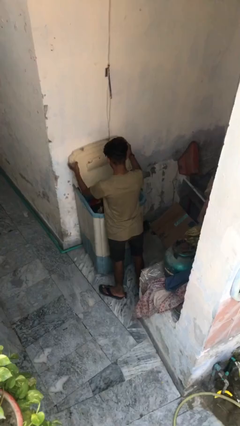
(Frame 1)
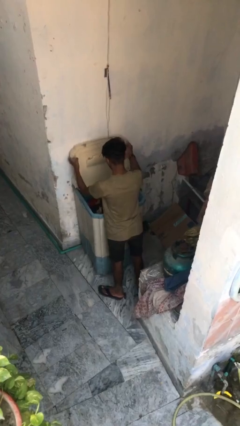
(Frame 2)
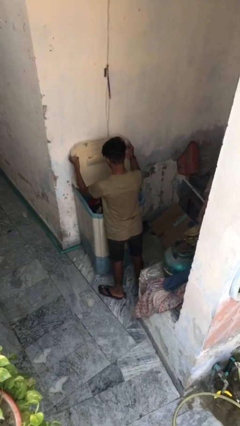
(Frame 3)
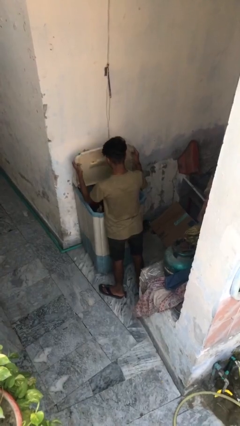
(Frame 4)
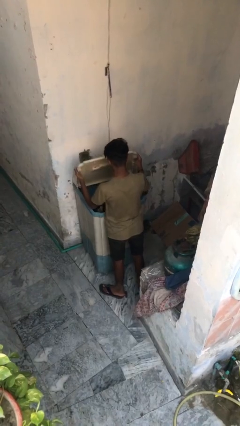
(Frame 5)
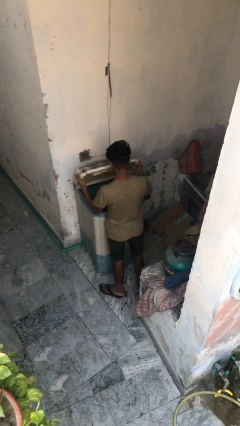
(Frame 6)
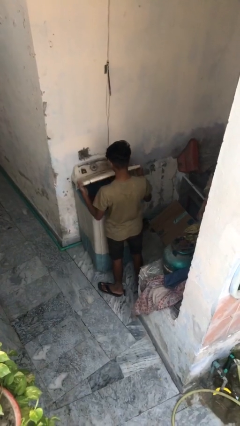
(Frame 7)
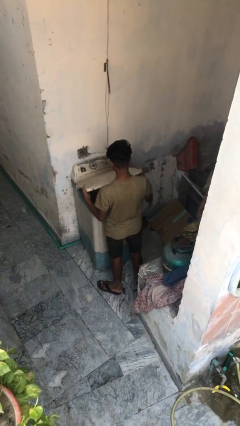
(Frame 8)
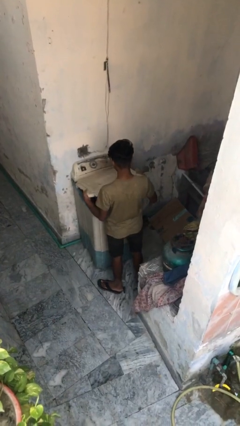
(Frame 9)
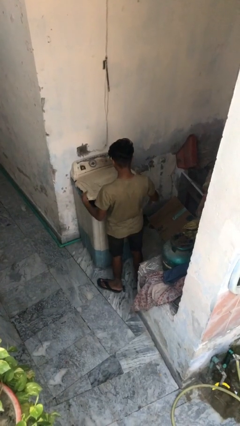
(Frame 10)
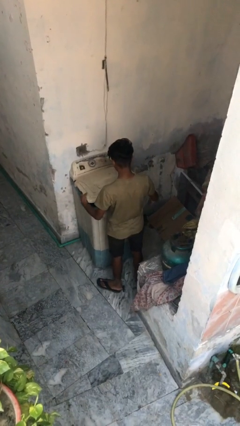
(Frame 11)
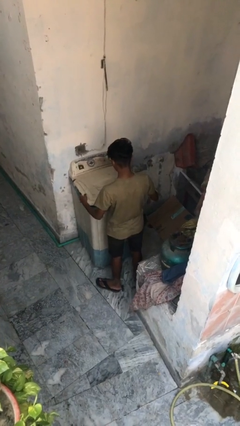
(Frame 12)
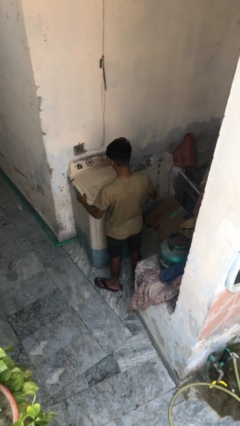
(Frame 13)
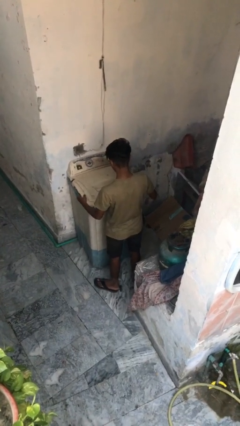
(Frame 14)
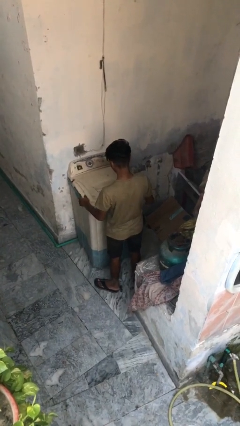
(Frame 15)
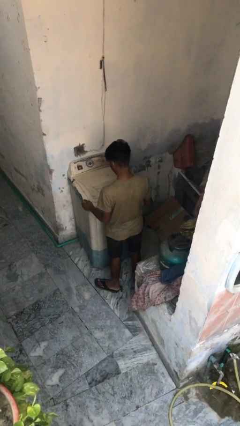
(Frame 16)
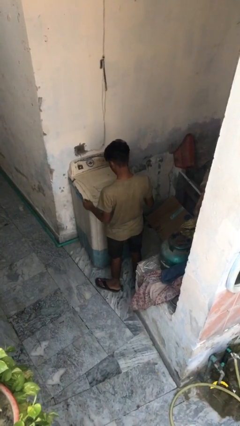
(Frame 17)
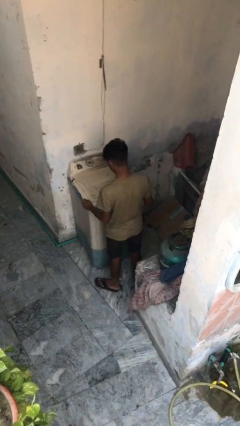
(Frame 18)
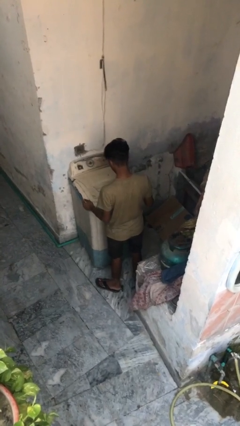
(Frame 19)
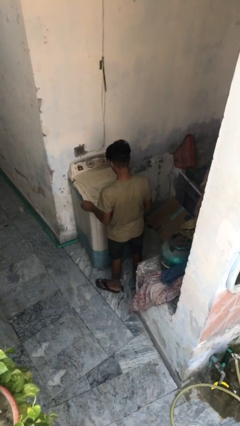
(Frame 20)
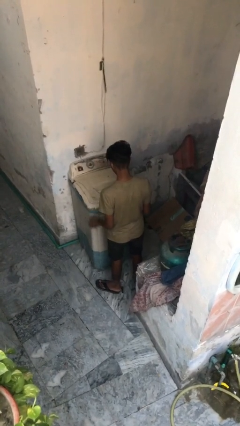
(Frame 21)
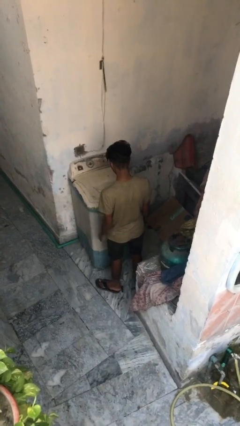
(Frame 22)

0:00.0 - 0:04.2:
person closes clothes washer

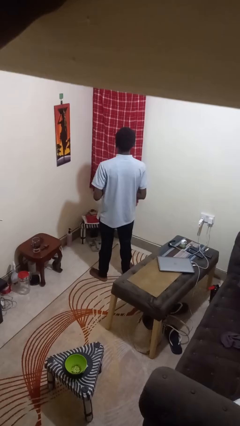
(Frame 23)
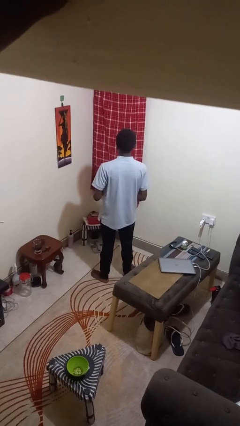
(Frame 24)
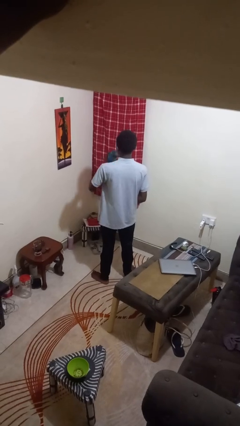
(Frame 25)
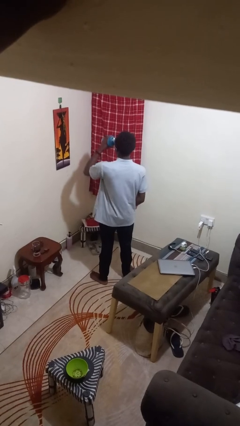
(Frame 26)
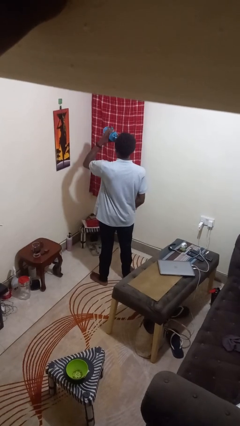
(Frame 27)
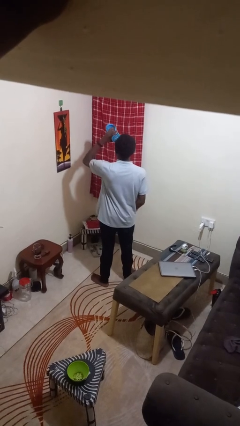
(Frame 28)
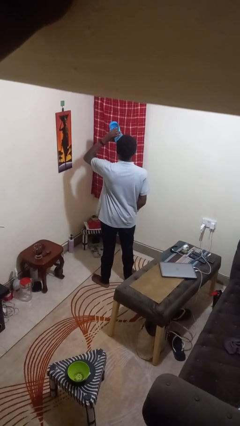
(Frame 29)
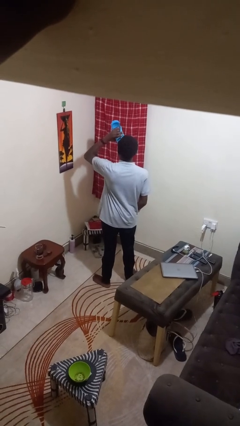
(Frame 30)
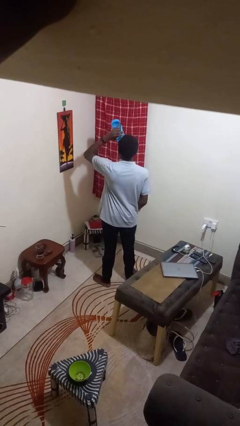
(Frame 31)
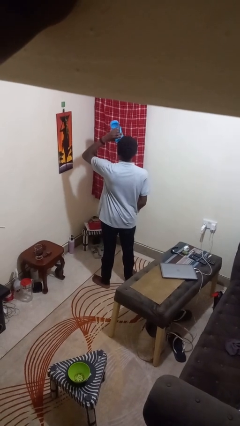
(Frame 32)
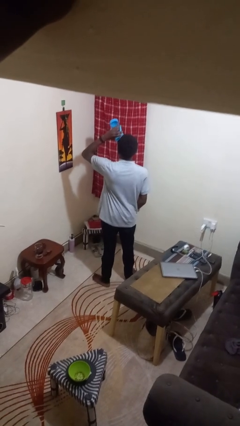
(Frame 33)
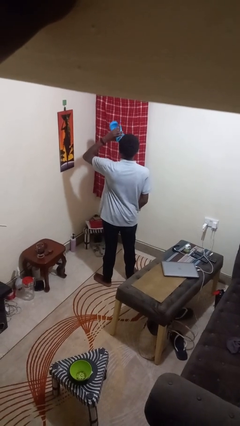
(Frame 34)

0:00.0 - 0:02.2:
person drinks from bottle

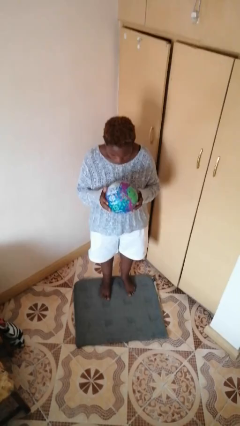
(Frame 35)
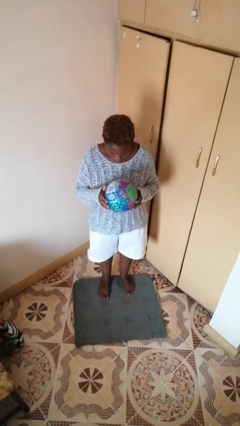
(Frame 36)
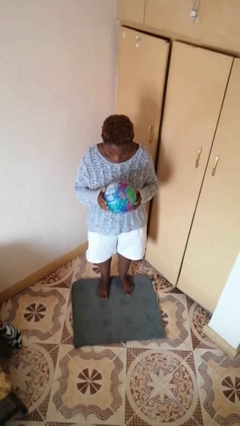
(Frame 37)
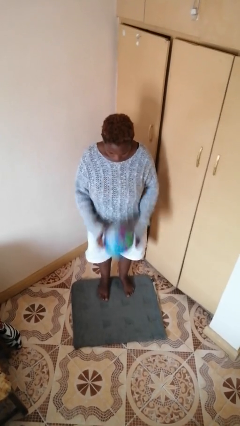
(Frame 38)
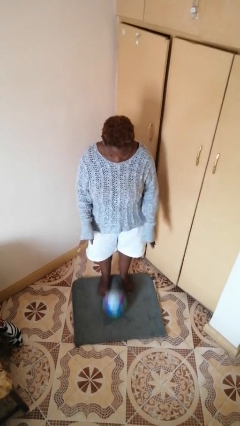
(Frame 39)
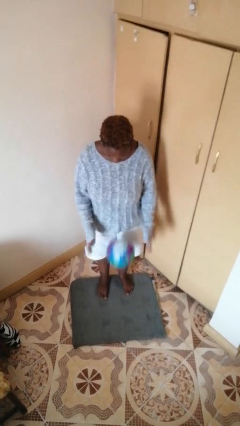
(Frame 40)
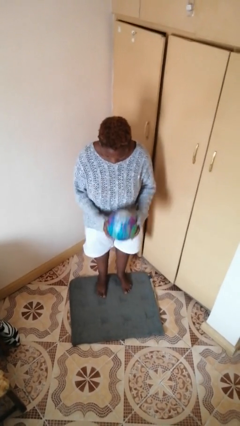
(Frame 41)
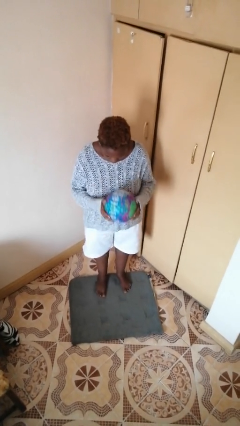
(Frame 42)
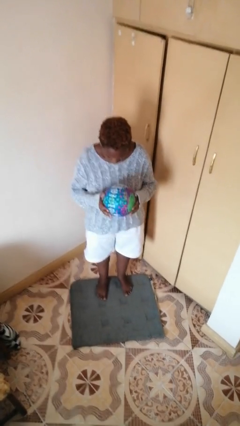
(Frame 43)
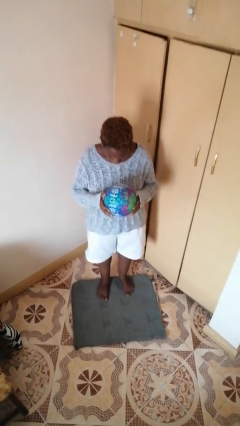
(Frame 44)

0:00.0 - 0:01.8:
person bounces ball on floor

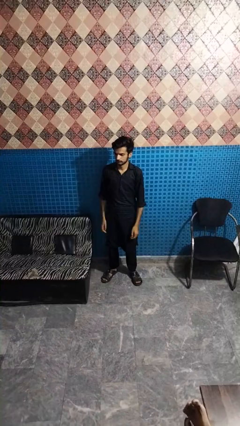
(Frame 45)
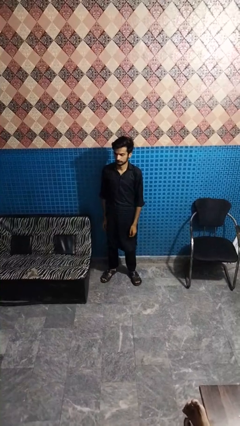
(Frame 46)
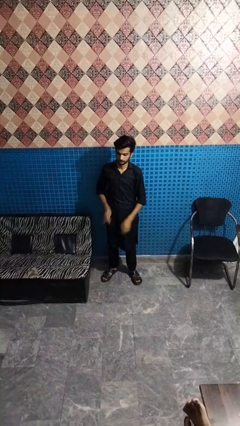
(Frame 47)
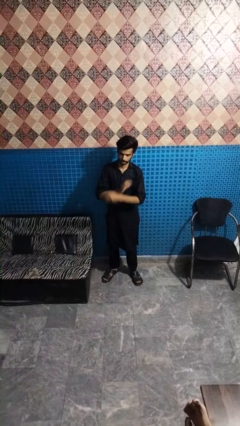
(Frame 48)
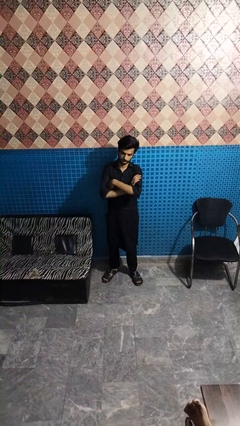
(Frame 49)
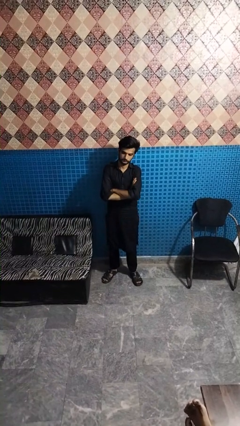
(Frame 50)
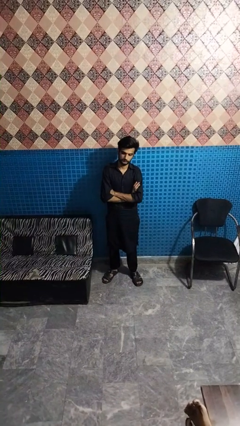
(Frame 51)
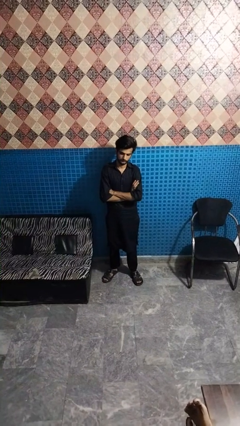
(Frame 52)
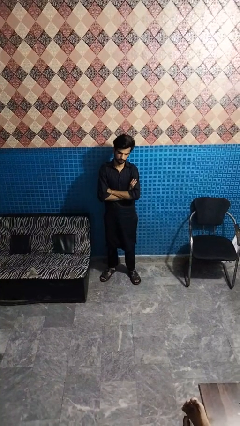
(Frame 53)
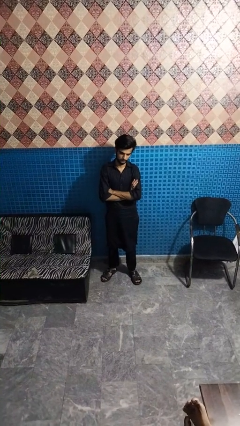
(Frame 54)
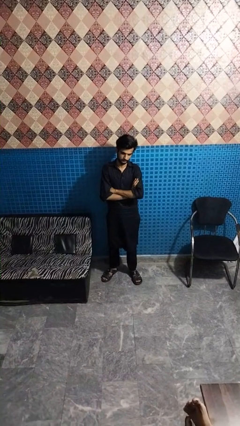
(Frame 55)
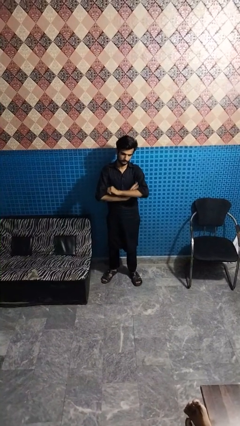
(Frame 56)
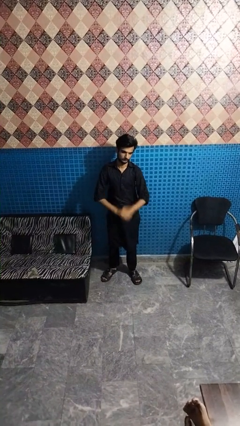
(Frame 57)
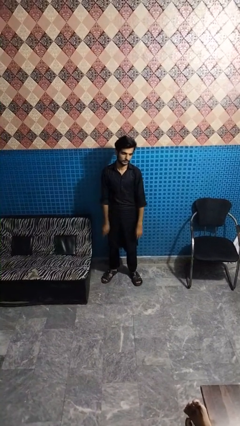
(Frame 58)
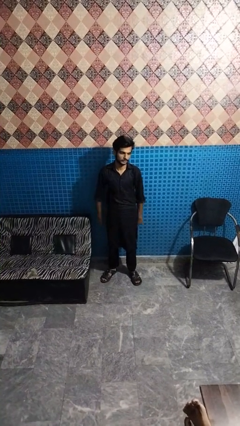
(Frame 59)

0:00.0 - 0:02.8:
person crosses arms

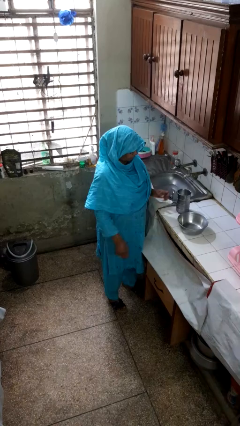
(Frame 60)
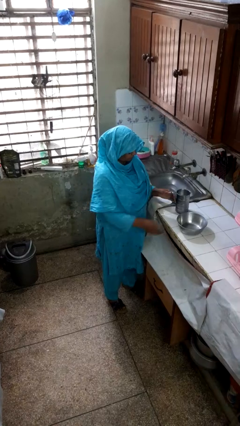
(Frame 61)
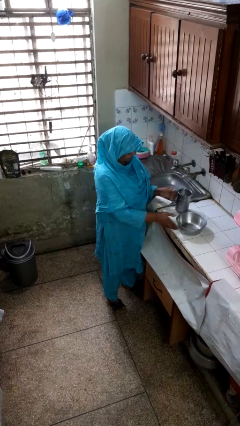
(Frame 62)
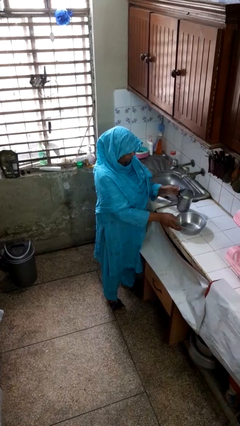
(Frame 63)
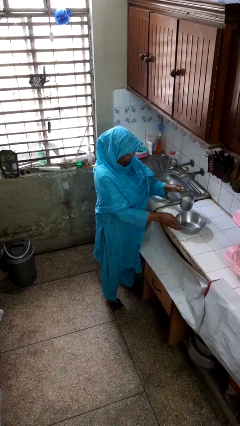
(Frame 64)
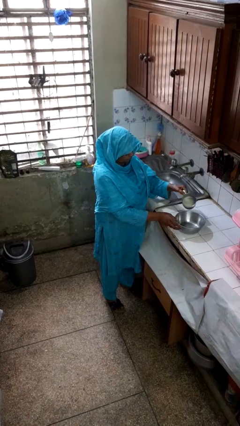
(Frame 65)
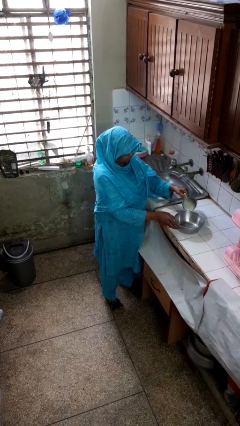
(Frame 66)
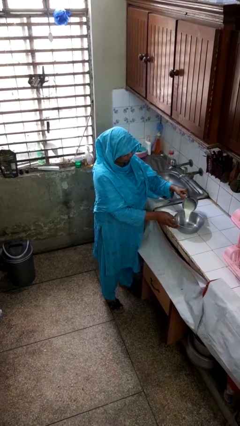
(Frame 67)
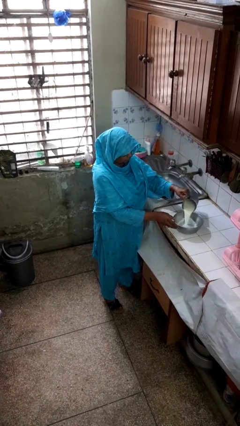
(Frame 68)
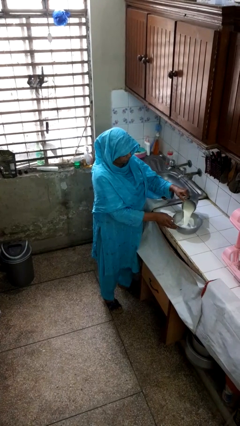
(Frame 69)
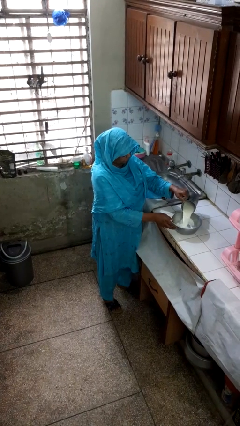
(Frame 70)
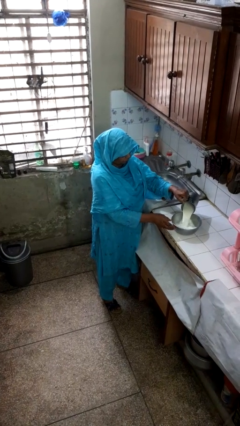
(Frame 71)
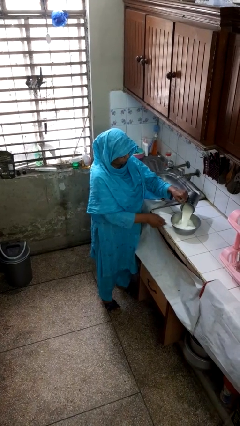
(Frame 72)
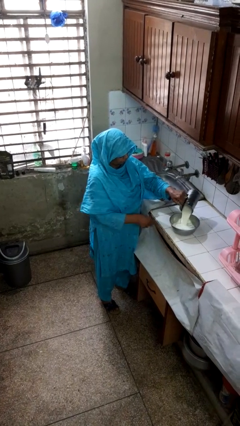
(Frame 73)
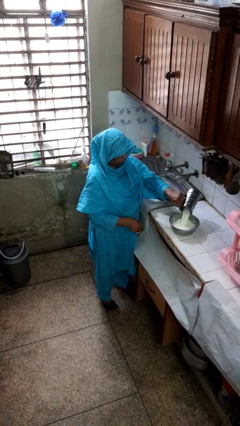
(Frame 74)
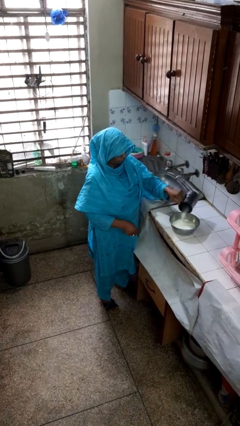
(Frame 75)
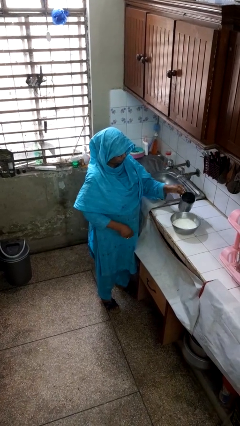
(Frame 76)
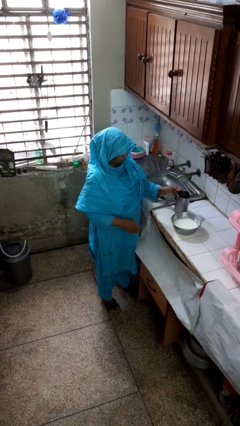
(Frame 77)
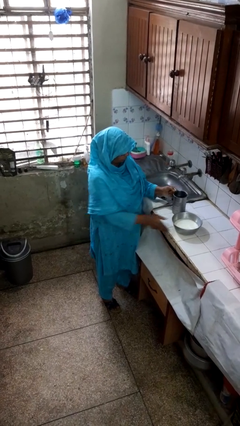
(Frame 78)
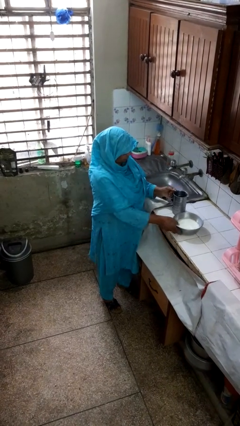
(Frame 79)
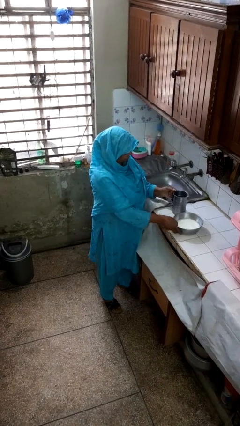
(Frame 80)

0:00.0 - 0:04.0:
person pours into bowl

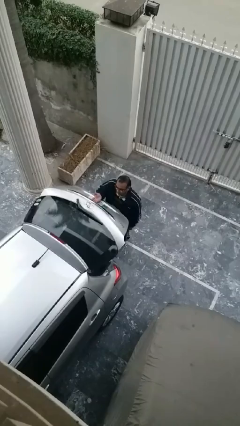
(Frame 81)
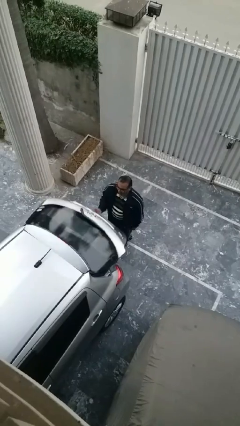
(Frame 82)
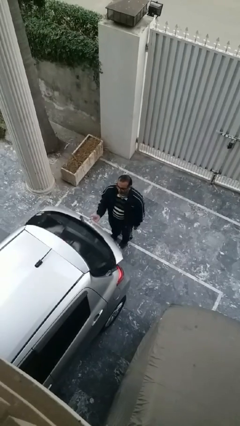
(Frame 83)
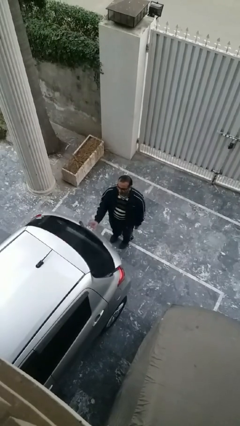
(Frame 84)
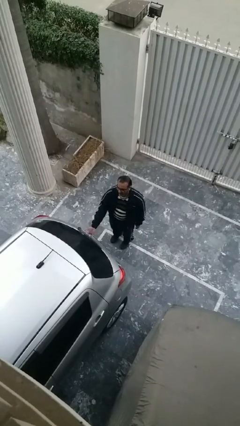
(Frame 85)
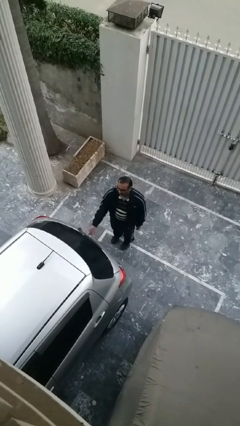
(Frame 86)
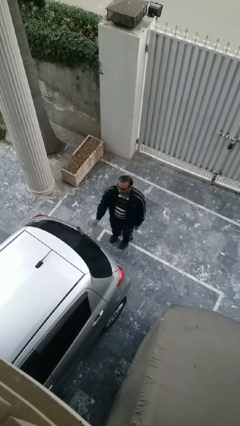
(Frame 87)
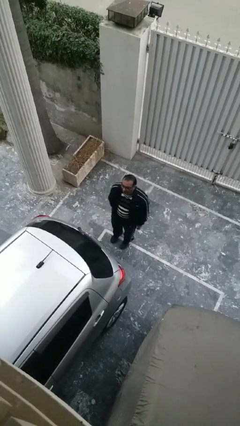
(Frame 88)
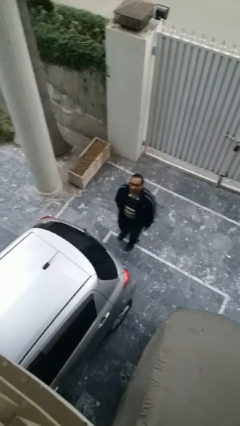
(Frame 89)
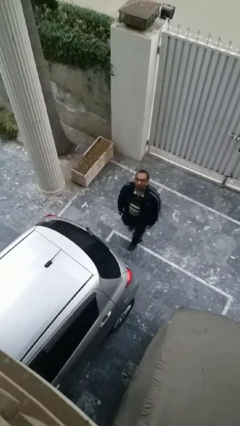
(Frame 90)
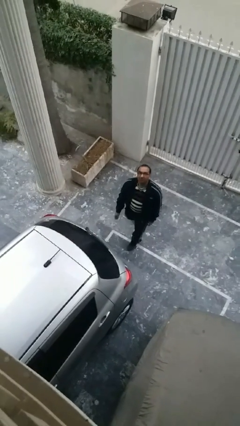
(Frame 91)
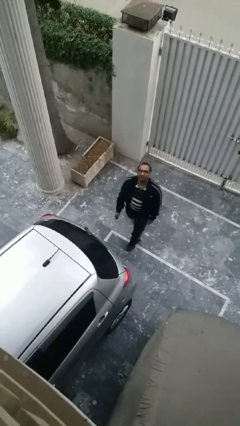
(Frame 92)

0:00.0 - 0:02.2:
person closes car trunk

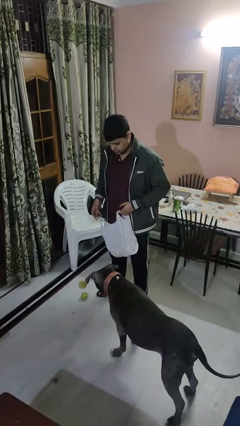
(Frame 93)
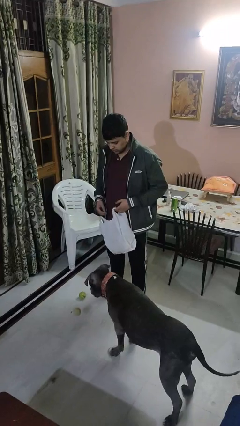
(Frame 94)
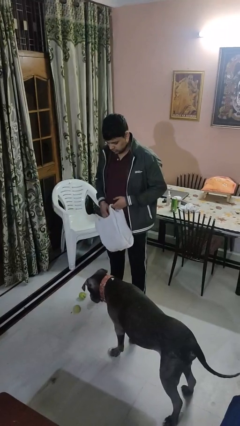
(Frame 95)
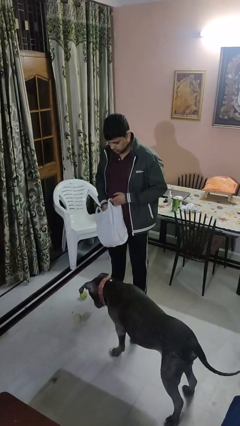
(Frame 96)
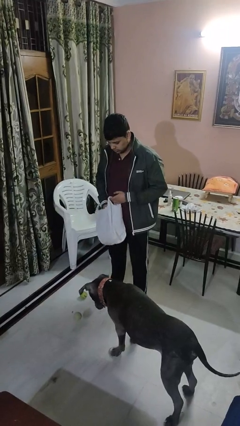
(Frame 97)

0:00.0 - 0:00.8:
person throws object to dog
